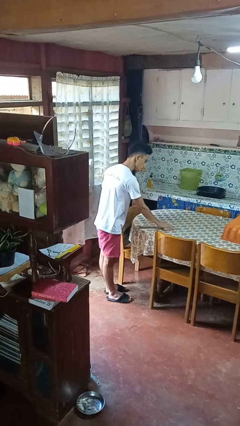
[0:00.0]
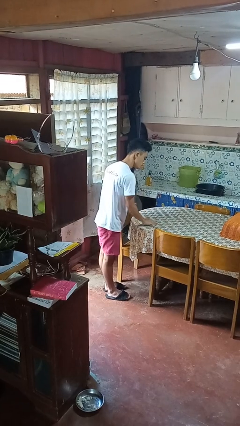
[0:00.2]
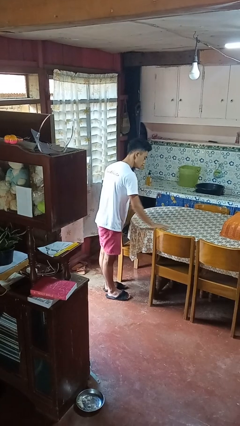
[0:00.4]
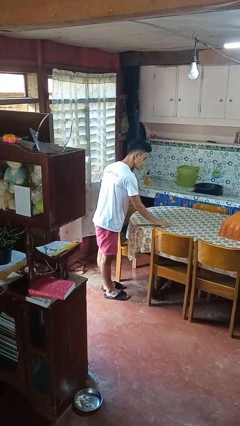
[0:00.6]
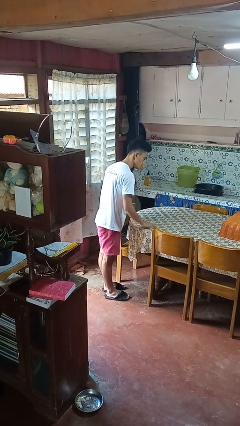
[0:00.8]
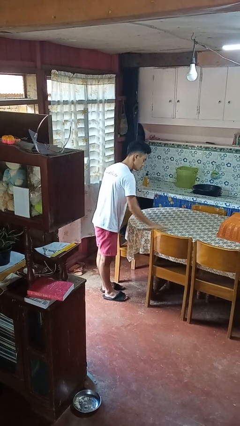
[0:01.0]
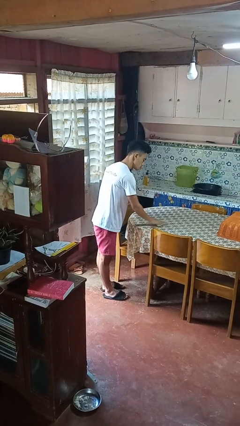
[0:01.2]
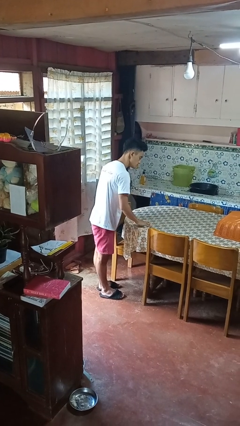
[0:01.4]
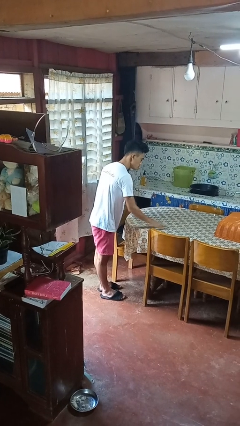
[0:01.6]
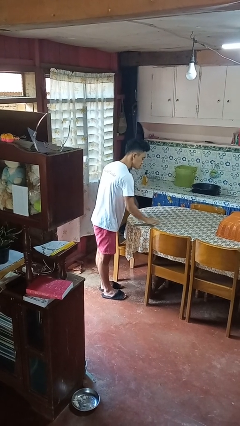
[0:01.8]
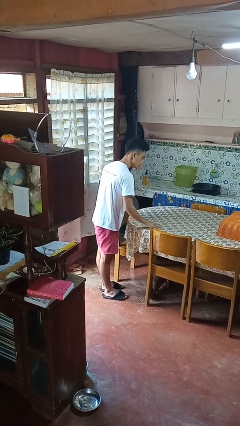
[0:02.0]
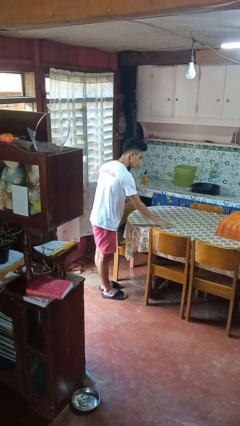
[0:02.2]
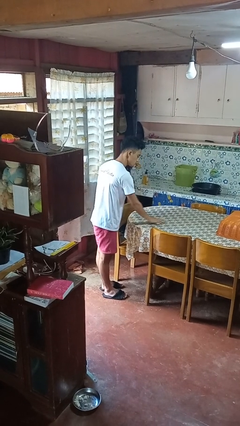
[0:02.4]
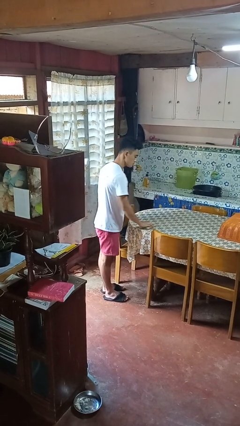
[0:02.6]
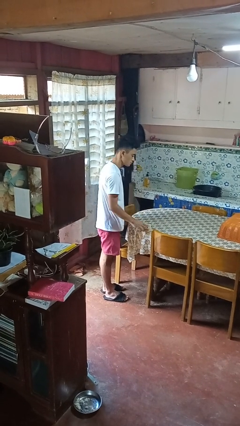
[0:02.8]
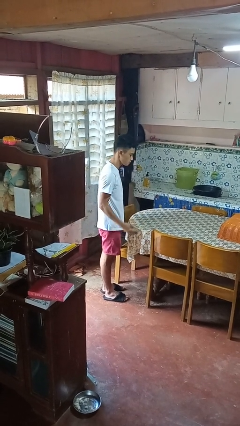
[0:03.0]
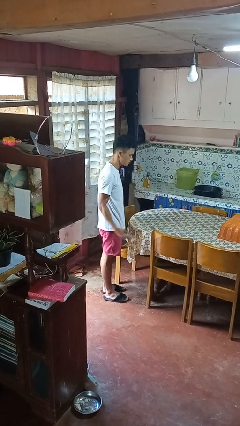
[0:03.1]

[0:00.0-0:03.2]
person cleans table with rag

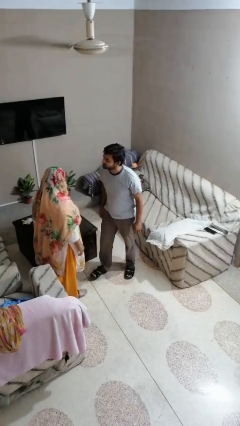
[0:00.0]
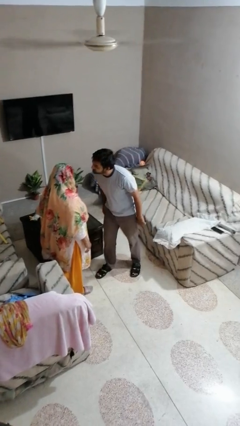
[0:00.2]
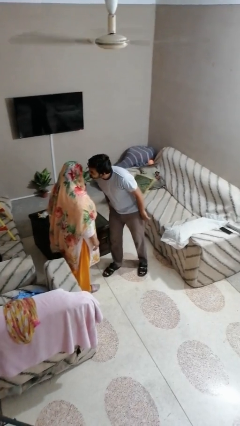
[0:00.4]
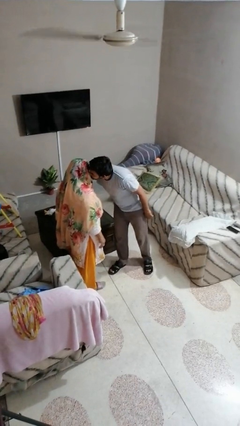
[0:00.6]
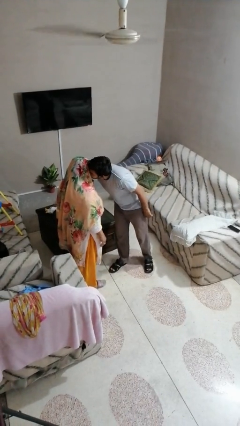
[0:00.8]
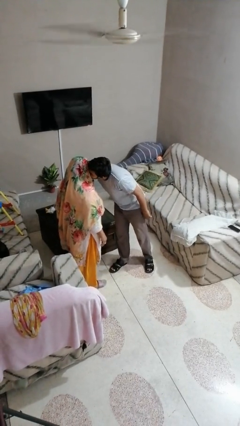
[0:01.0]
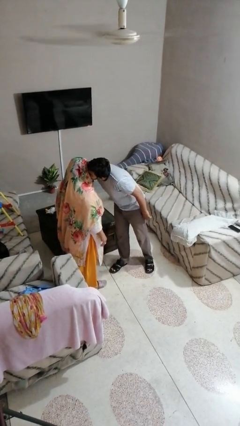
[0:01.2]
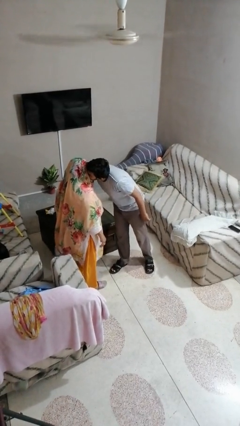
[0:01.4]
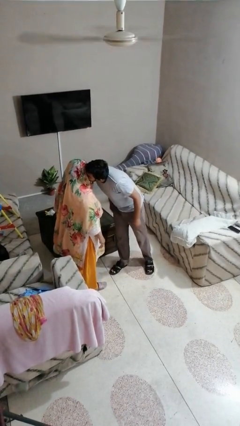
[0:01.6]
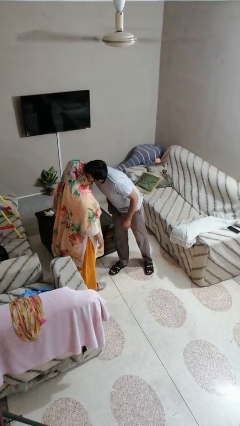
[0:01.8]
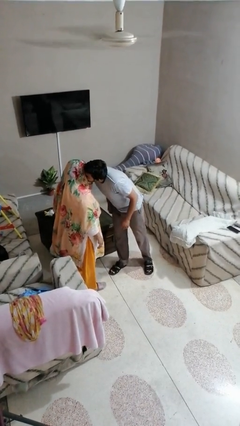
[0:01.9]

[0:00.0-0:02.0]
person kisses cheek of person

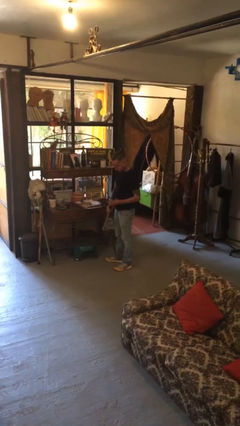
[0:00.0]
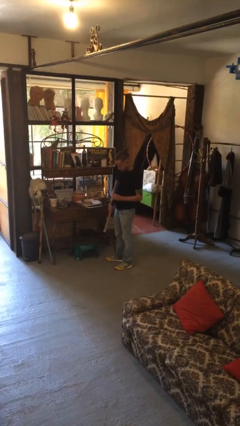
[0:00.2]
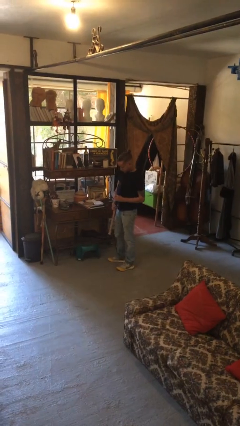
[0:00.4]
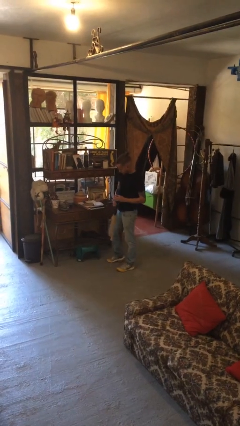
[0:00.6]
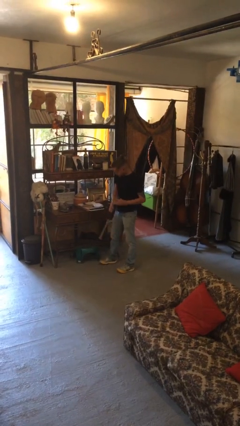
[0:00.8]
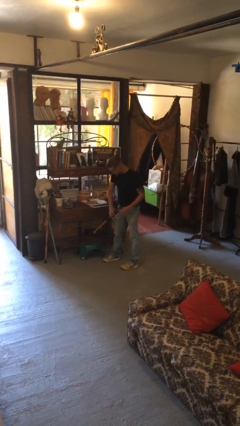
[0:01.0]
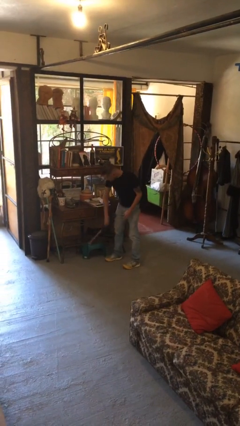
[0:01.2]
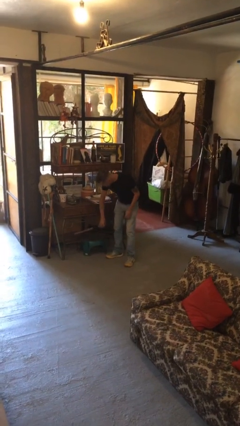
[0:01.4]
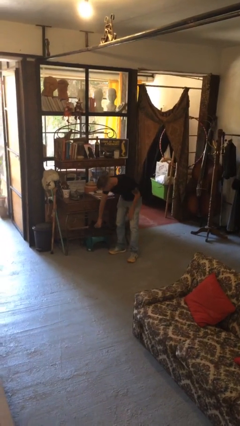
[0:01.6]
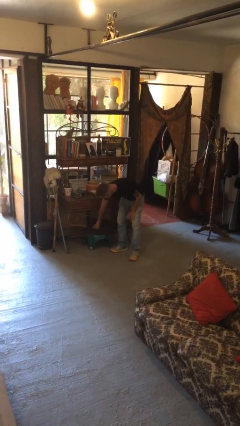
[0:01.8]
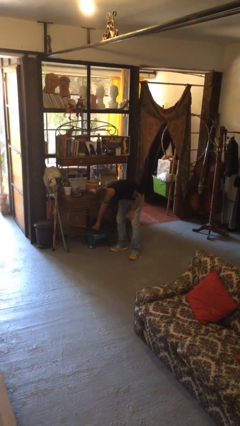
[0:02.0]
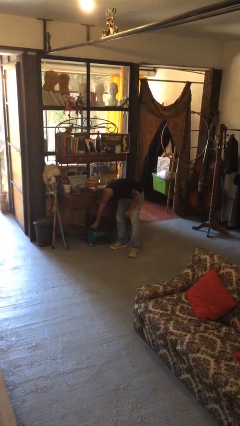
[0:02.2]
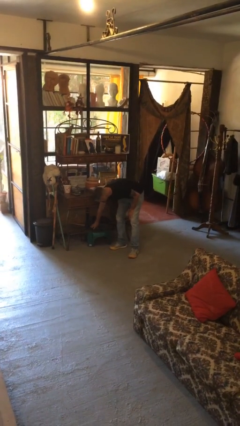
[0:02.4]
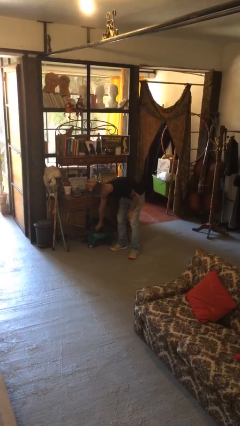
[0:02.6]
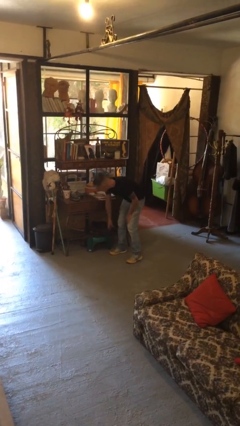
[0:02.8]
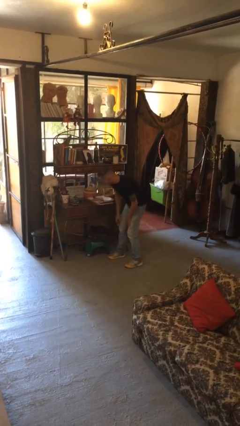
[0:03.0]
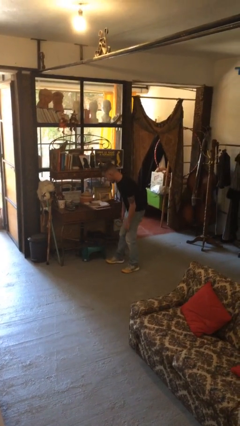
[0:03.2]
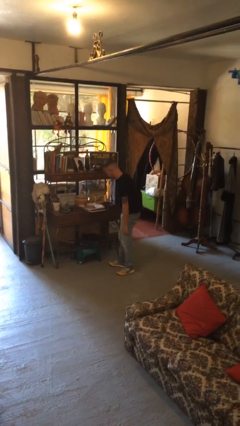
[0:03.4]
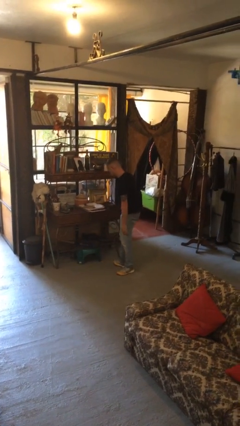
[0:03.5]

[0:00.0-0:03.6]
person puts down object into cabinet

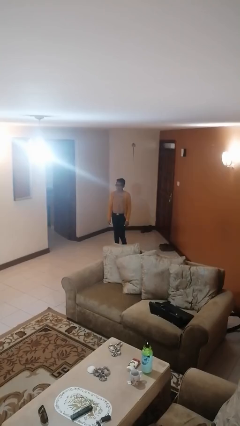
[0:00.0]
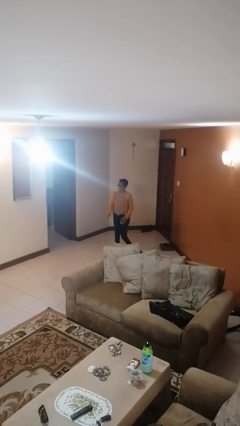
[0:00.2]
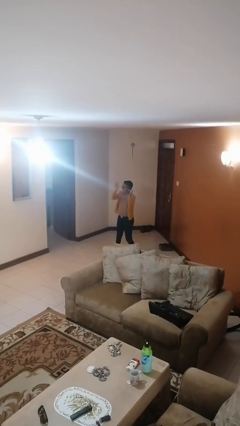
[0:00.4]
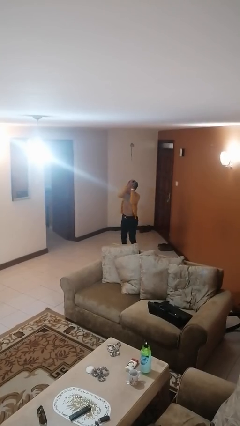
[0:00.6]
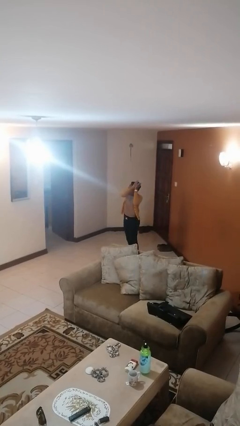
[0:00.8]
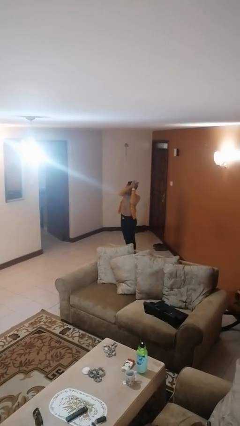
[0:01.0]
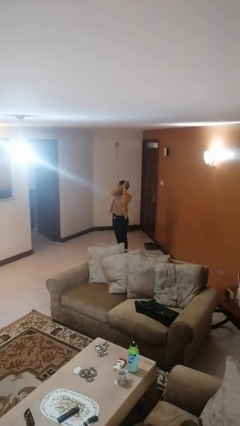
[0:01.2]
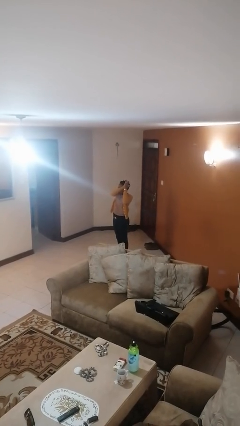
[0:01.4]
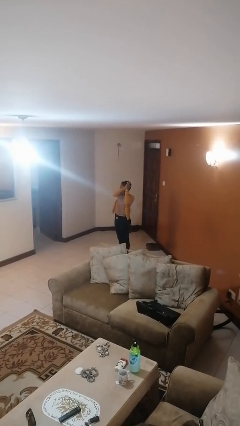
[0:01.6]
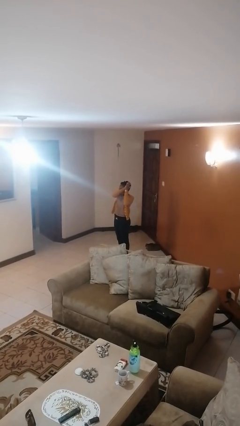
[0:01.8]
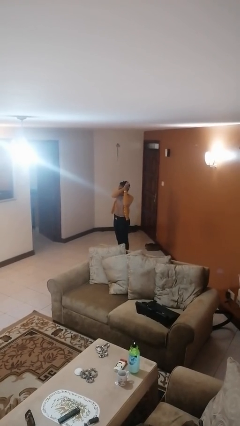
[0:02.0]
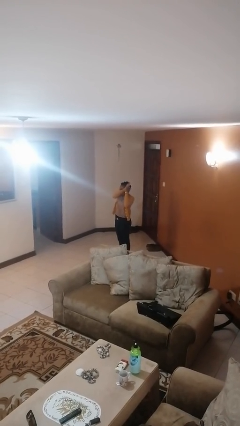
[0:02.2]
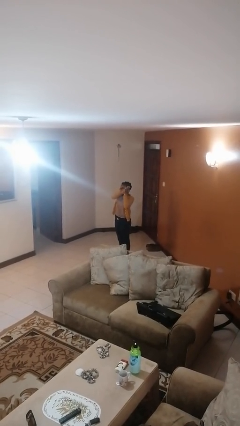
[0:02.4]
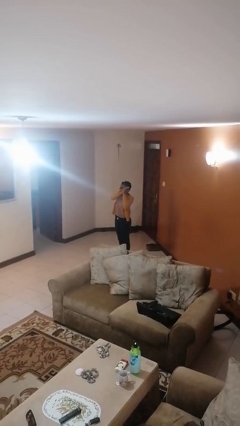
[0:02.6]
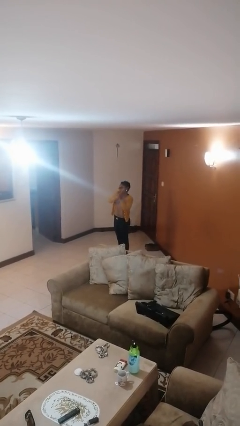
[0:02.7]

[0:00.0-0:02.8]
person claps hands

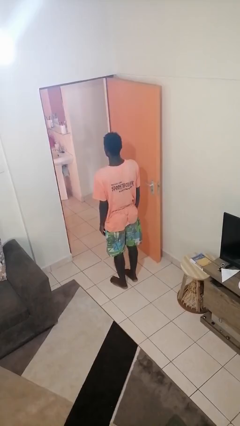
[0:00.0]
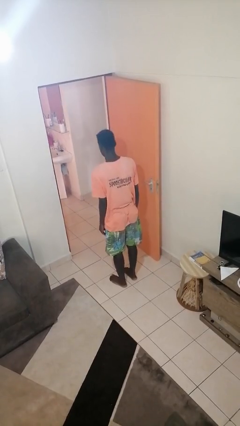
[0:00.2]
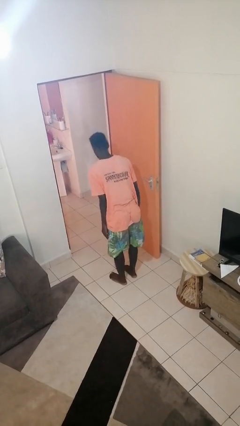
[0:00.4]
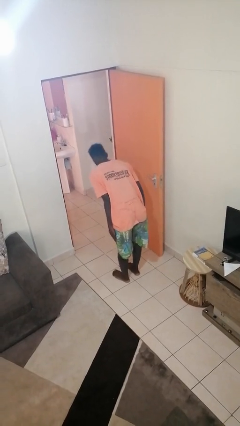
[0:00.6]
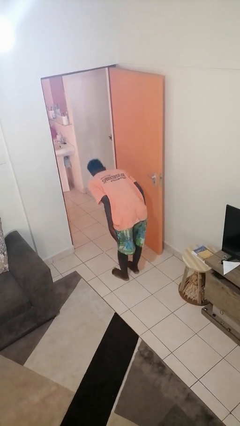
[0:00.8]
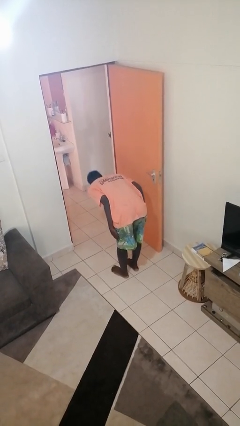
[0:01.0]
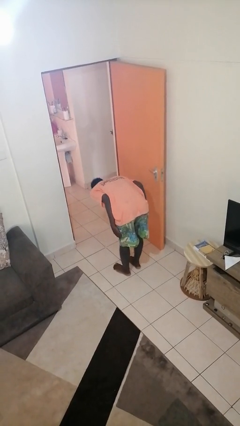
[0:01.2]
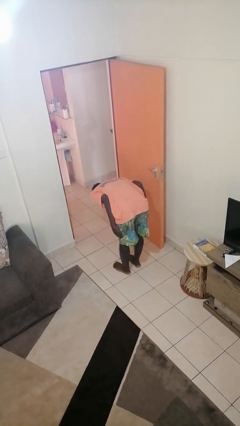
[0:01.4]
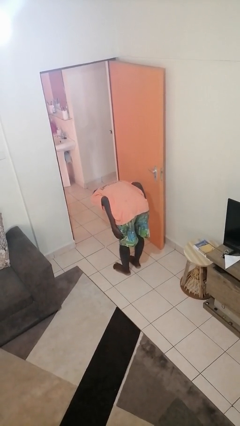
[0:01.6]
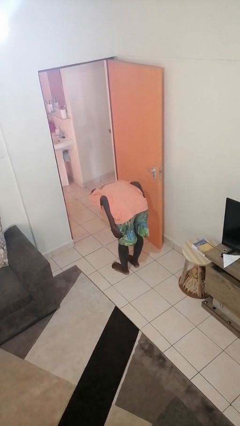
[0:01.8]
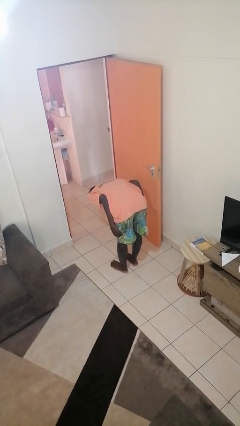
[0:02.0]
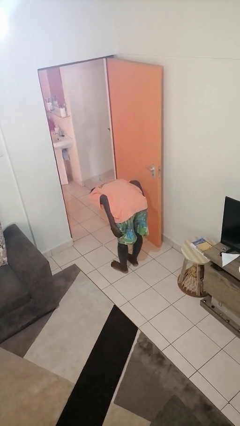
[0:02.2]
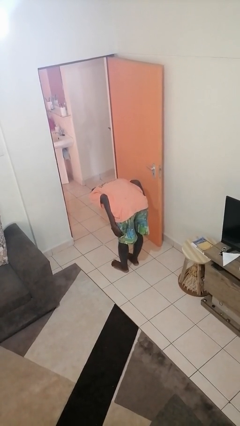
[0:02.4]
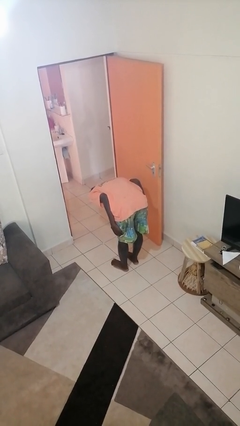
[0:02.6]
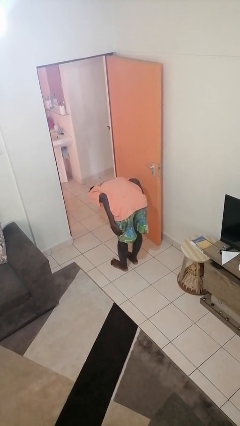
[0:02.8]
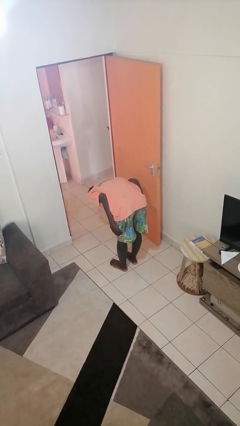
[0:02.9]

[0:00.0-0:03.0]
person bows

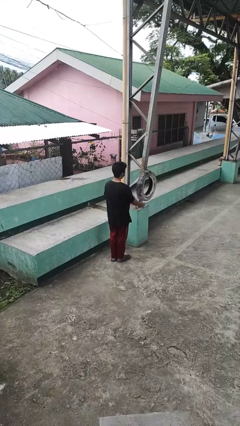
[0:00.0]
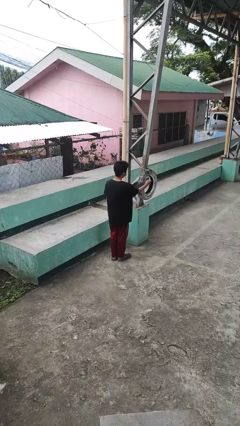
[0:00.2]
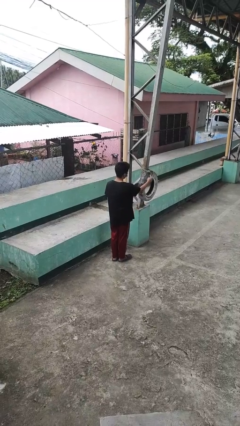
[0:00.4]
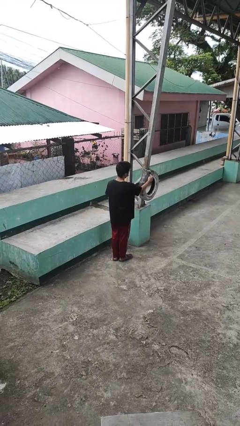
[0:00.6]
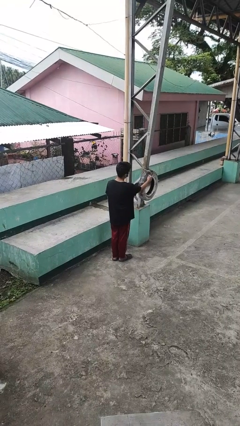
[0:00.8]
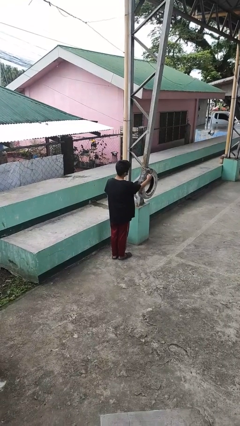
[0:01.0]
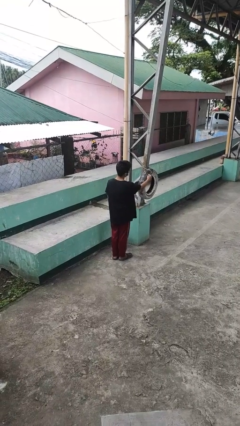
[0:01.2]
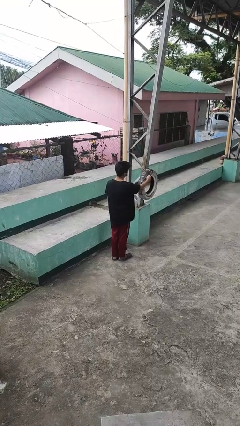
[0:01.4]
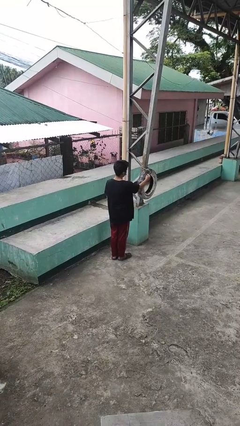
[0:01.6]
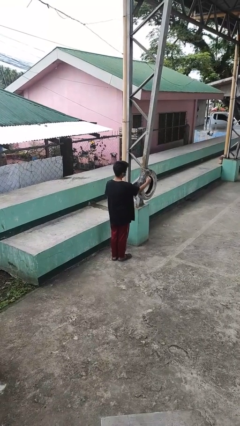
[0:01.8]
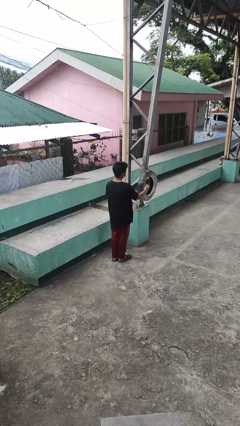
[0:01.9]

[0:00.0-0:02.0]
person taps object with finger

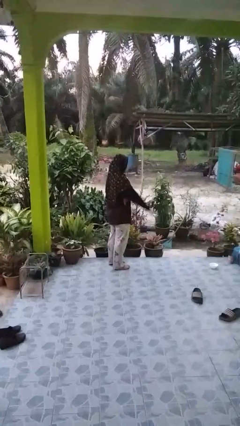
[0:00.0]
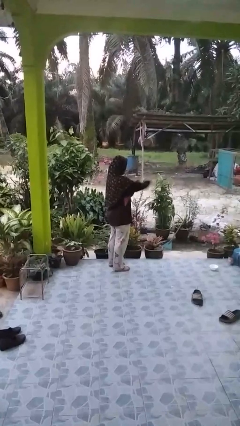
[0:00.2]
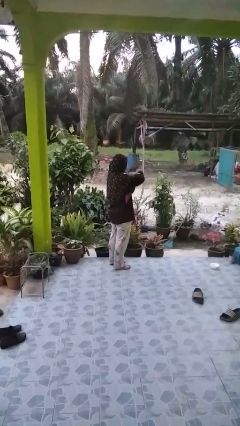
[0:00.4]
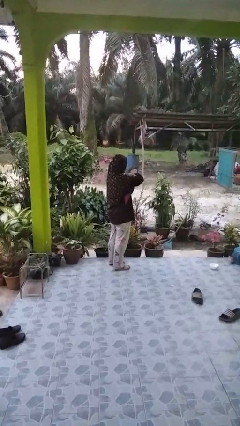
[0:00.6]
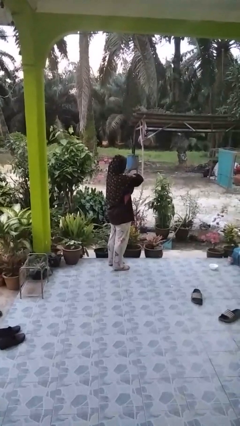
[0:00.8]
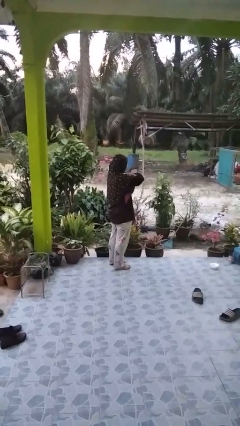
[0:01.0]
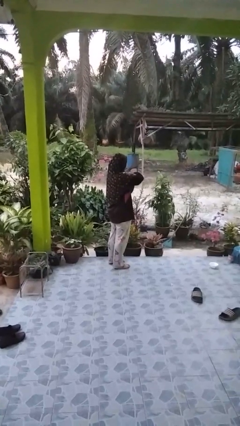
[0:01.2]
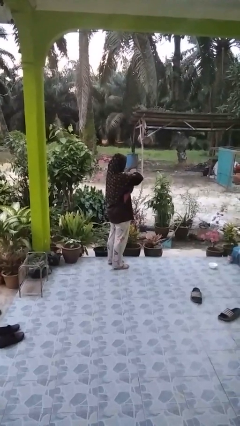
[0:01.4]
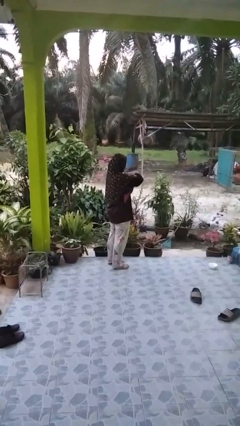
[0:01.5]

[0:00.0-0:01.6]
person looks at wristwatch
